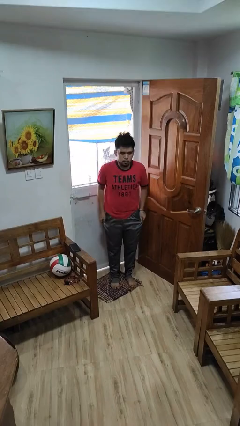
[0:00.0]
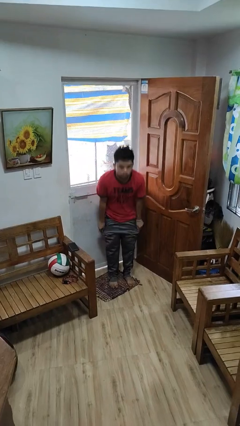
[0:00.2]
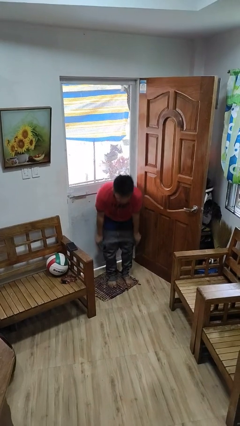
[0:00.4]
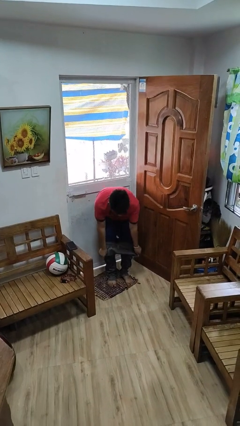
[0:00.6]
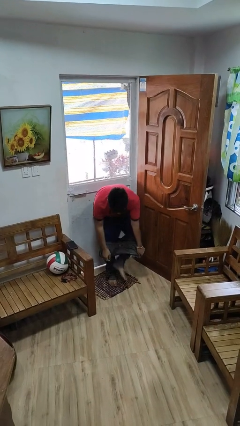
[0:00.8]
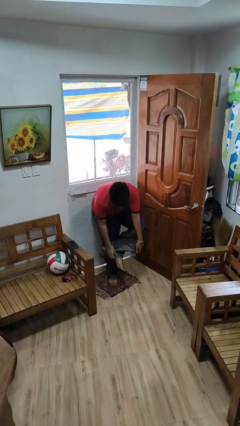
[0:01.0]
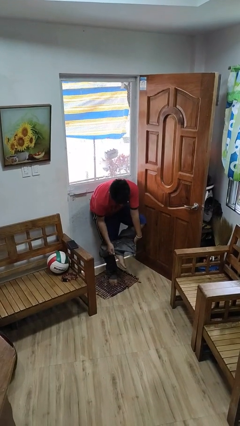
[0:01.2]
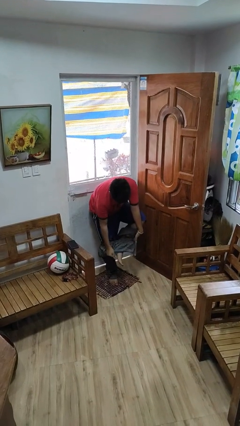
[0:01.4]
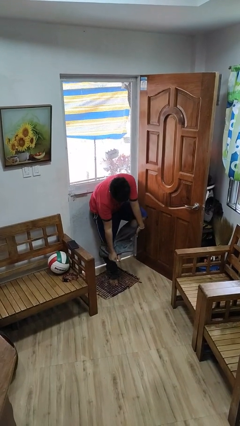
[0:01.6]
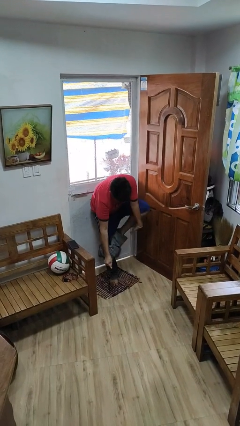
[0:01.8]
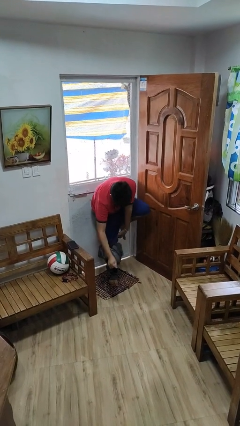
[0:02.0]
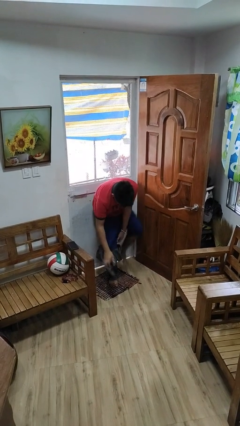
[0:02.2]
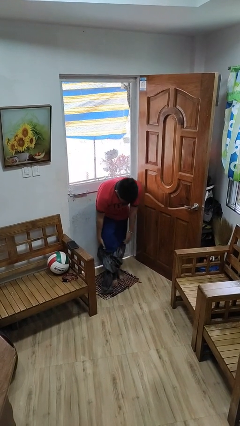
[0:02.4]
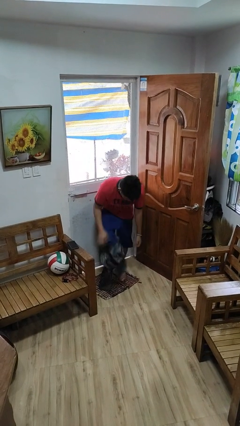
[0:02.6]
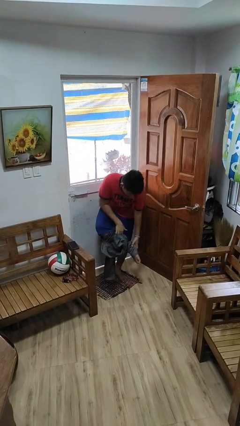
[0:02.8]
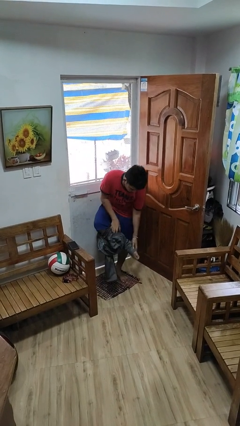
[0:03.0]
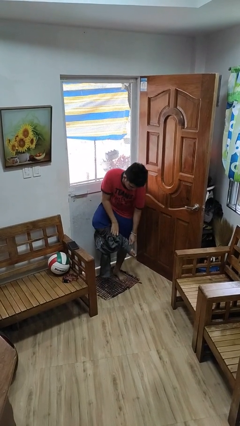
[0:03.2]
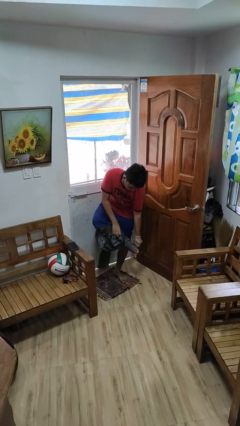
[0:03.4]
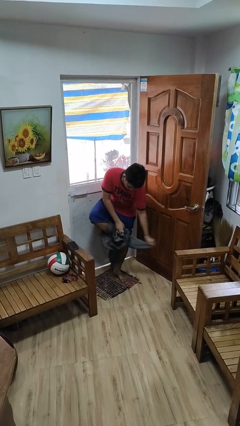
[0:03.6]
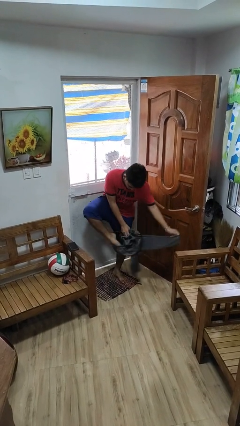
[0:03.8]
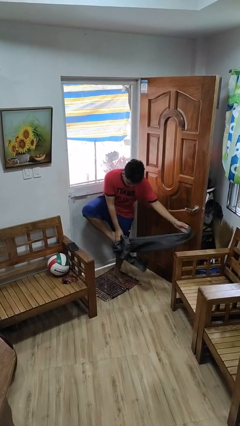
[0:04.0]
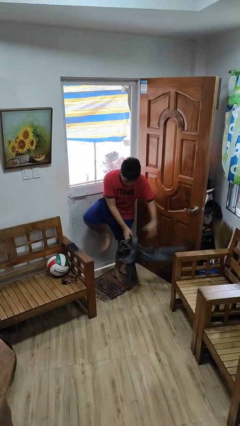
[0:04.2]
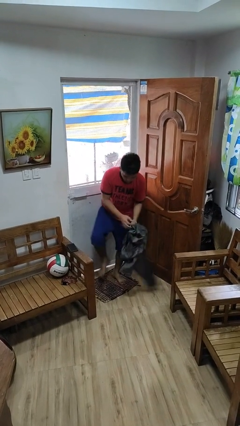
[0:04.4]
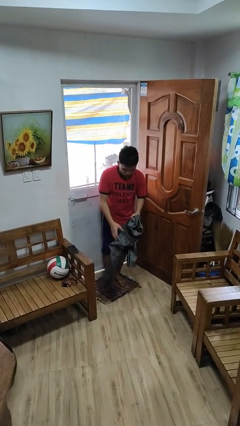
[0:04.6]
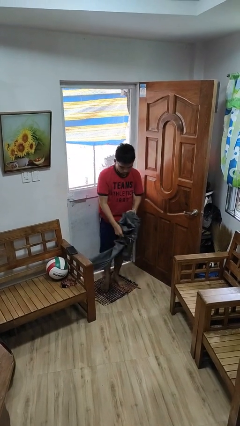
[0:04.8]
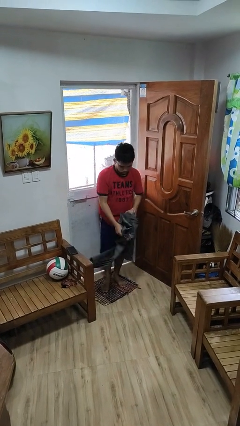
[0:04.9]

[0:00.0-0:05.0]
person takes off pants

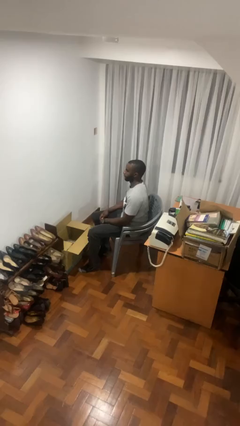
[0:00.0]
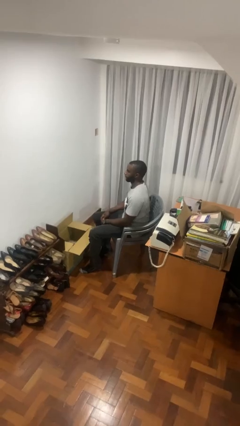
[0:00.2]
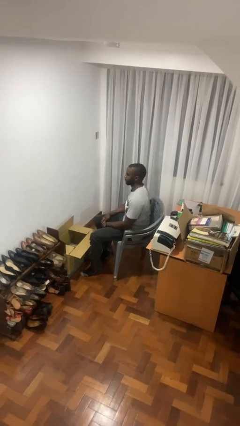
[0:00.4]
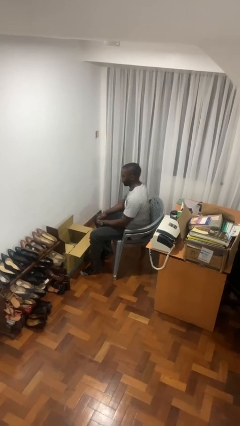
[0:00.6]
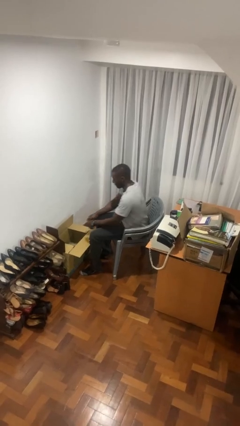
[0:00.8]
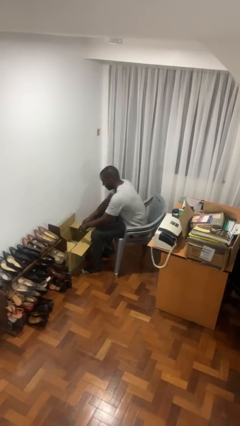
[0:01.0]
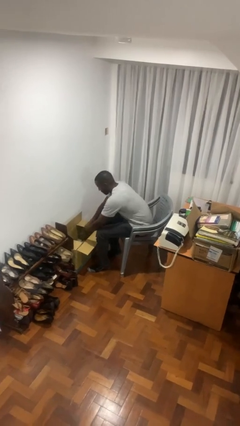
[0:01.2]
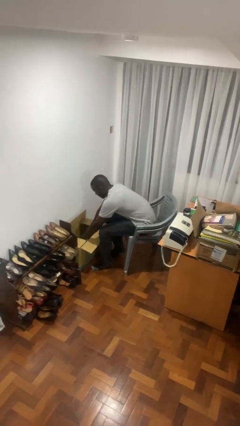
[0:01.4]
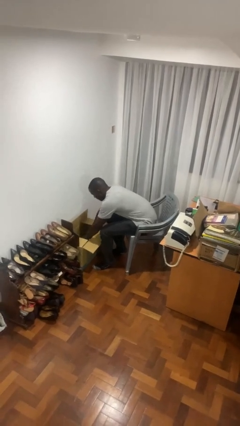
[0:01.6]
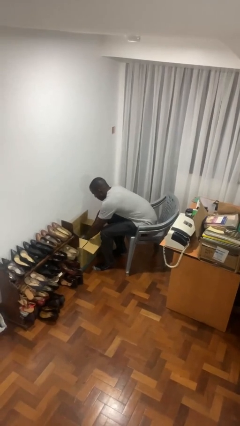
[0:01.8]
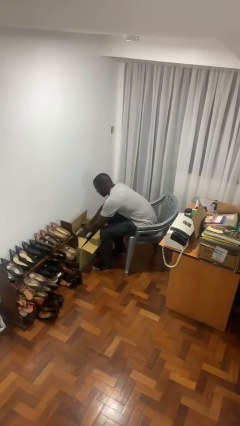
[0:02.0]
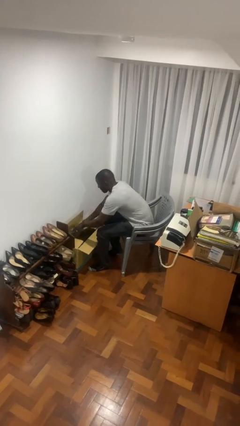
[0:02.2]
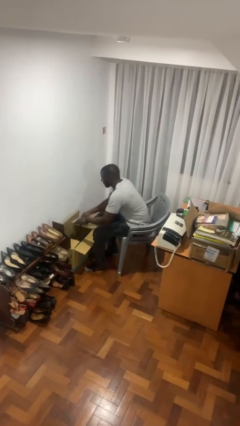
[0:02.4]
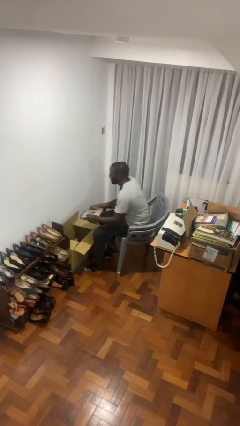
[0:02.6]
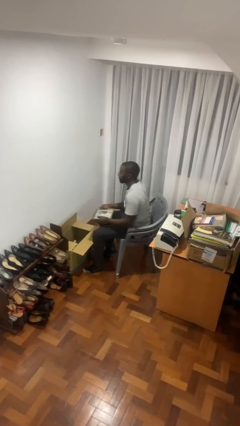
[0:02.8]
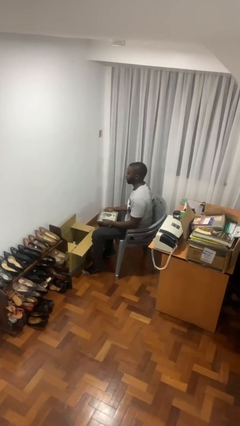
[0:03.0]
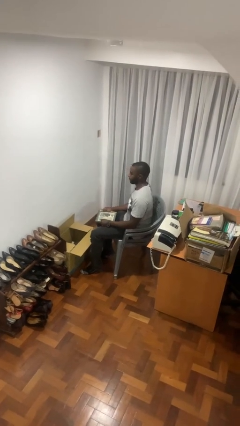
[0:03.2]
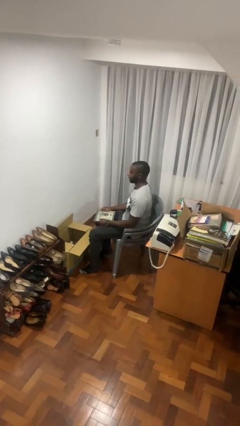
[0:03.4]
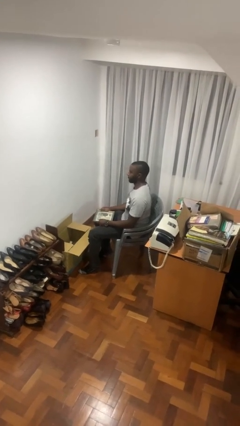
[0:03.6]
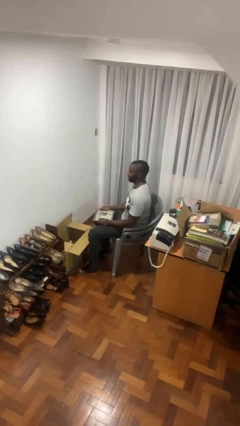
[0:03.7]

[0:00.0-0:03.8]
person takes object from box

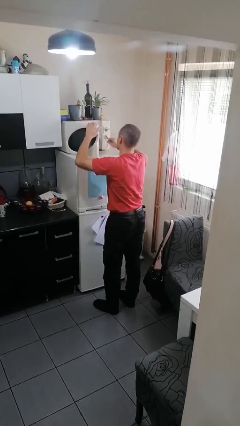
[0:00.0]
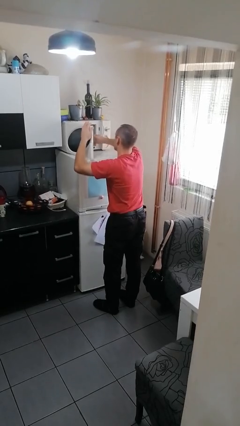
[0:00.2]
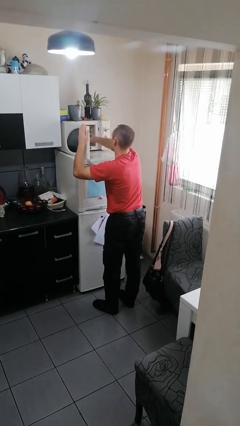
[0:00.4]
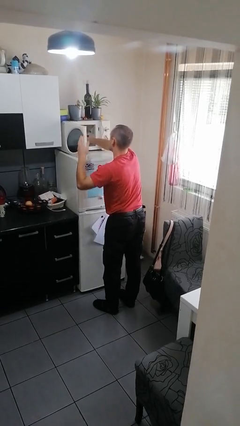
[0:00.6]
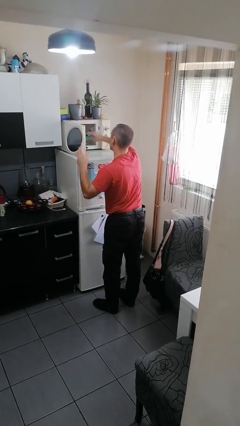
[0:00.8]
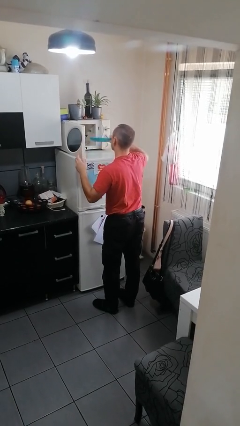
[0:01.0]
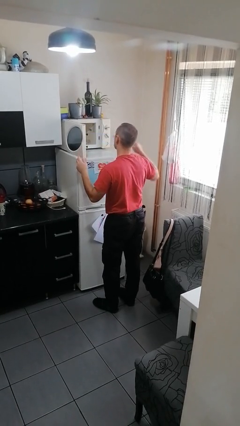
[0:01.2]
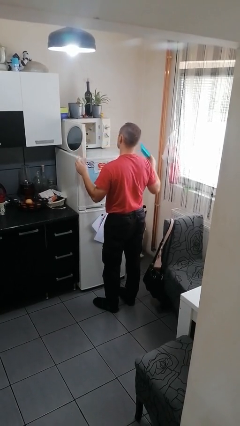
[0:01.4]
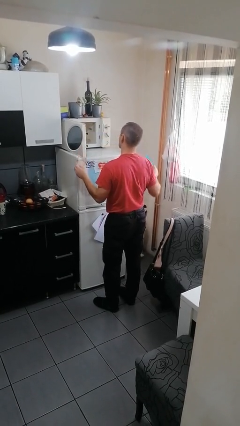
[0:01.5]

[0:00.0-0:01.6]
person takes object from microwave

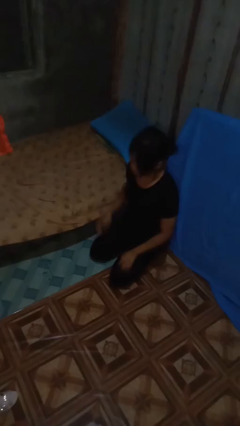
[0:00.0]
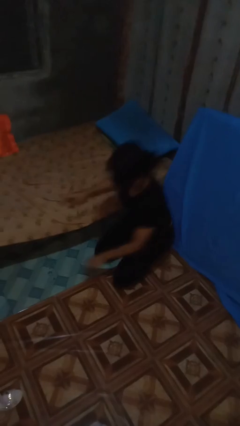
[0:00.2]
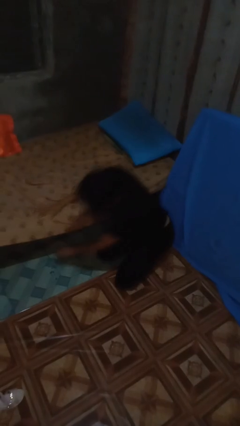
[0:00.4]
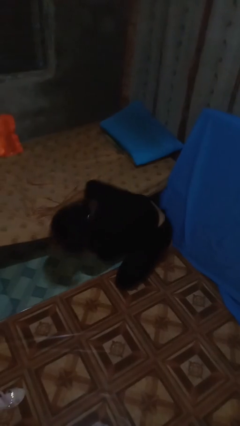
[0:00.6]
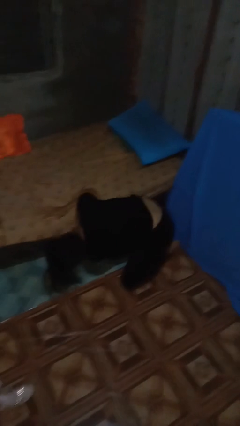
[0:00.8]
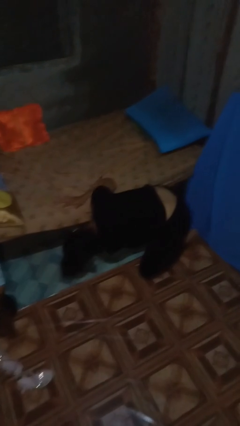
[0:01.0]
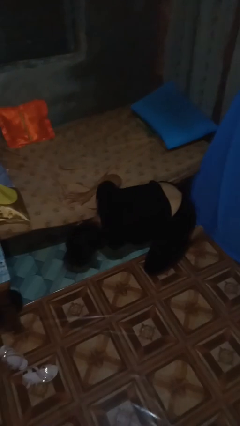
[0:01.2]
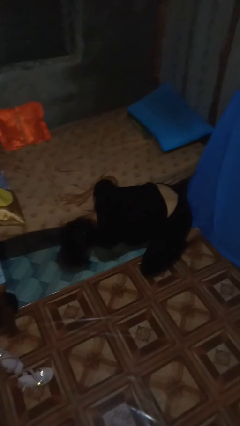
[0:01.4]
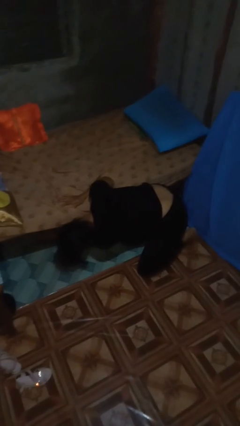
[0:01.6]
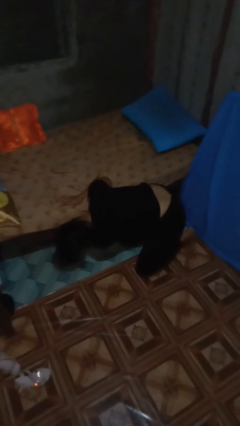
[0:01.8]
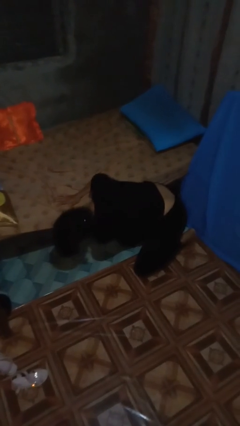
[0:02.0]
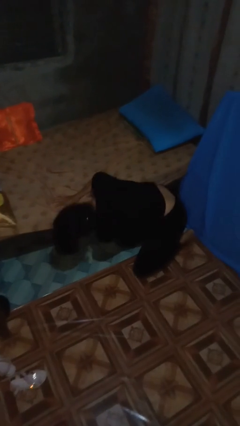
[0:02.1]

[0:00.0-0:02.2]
person searches under bed

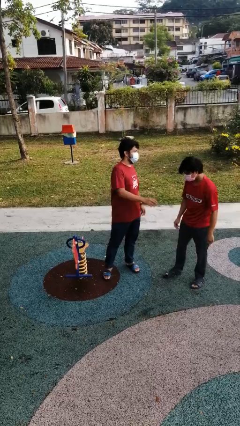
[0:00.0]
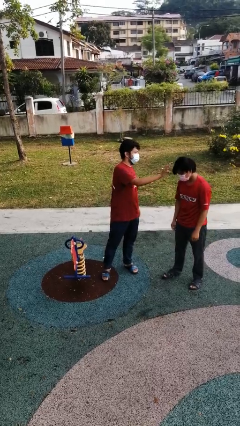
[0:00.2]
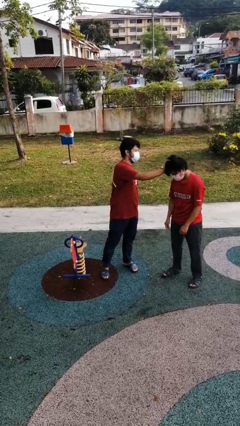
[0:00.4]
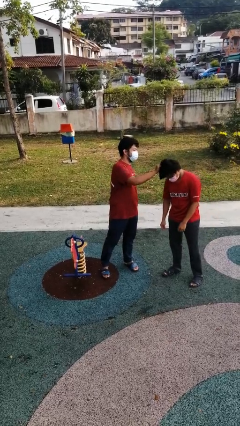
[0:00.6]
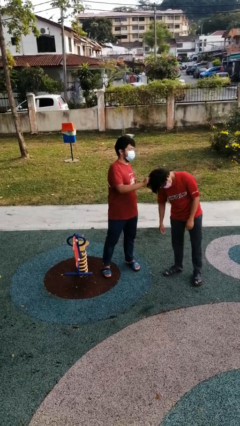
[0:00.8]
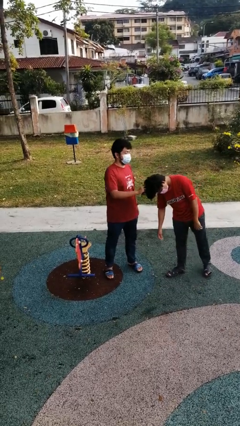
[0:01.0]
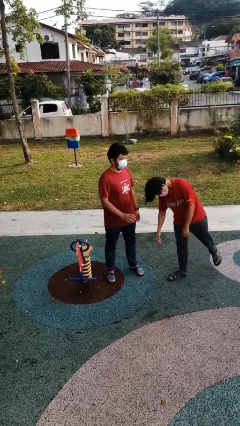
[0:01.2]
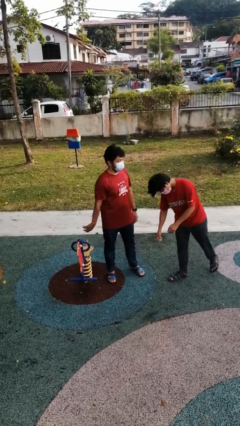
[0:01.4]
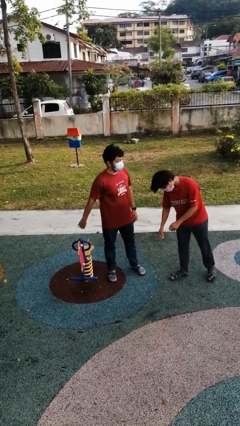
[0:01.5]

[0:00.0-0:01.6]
person grabs person by hair

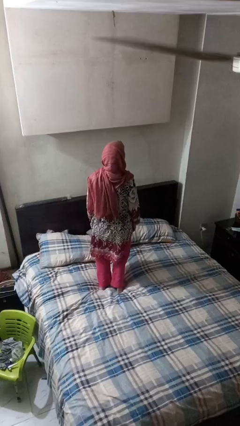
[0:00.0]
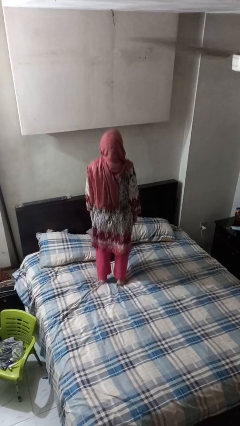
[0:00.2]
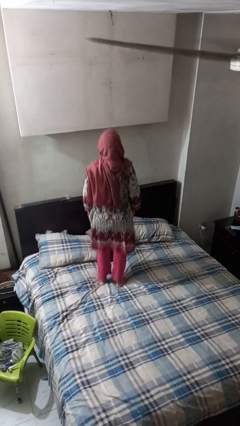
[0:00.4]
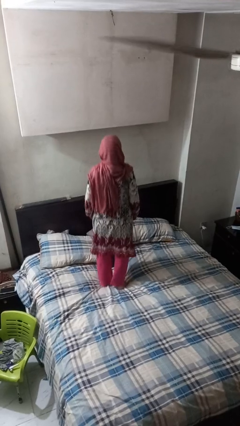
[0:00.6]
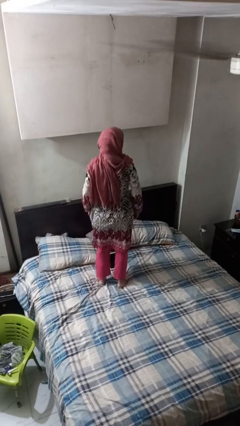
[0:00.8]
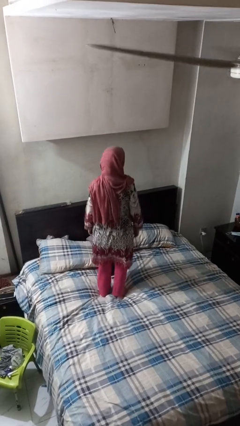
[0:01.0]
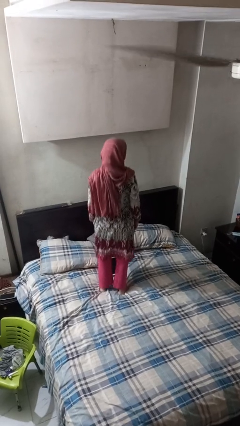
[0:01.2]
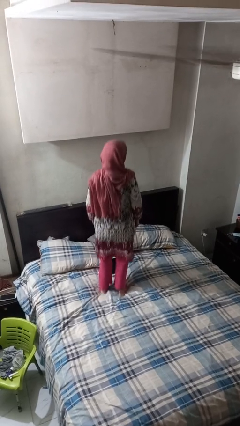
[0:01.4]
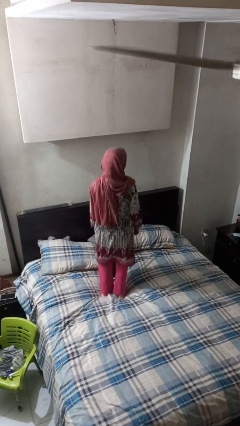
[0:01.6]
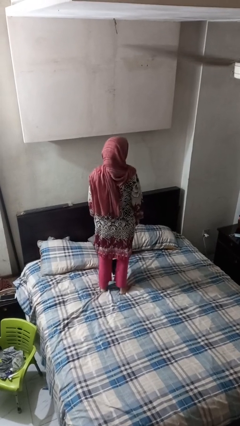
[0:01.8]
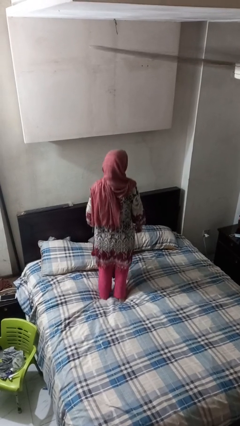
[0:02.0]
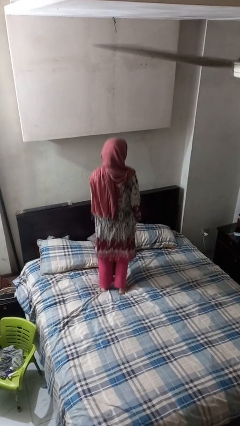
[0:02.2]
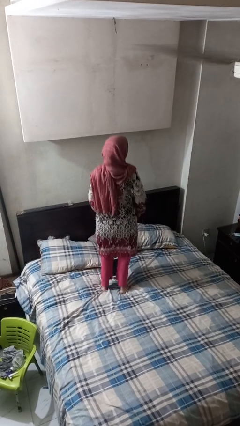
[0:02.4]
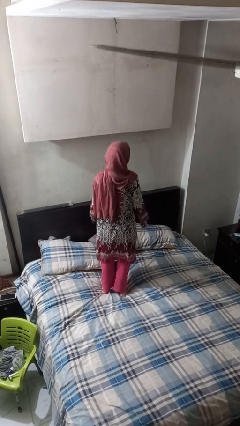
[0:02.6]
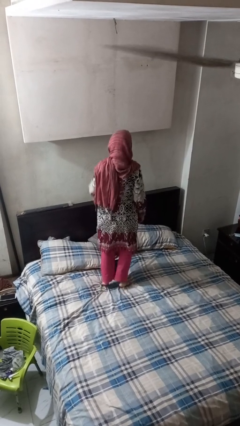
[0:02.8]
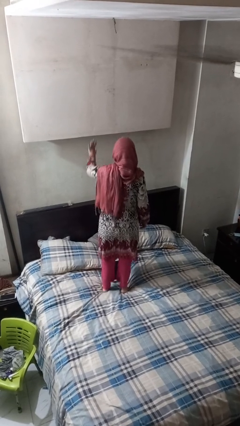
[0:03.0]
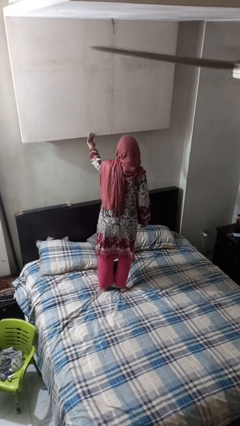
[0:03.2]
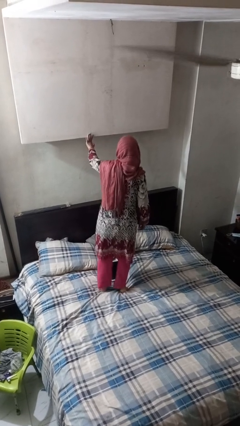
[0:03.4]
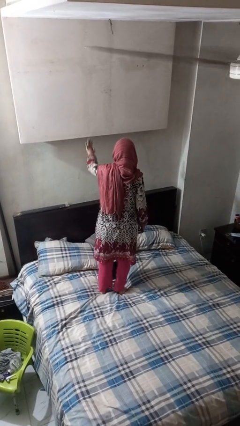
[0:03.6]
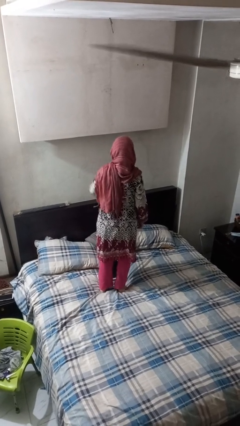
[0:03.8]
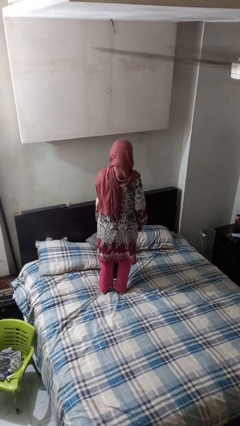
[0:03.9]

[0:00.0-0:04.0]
person jumps on bed
